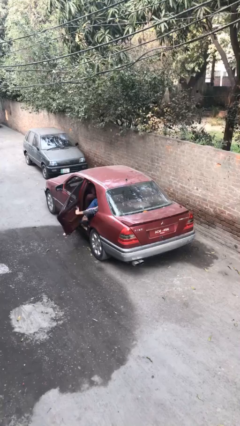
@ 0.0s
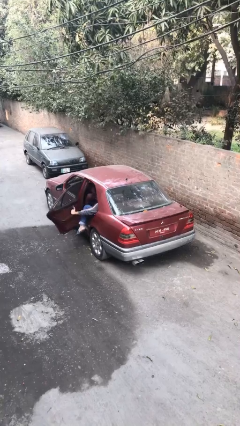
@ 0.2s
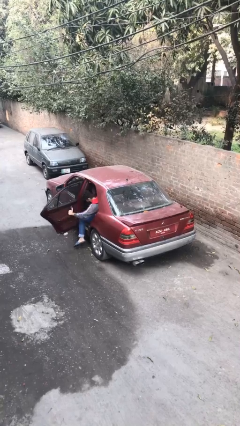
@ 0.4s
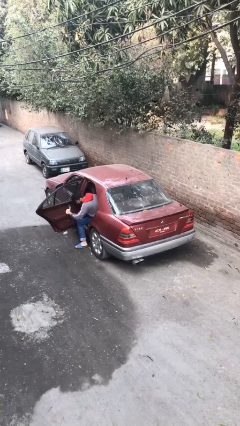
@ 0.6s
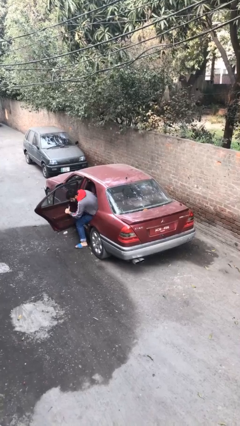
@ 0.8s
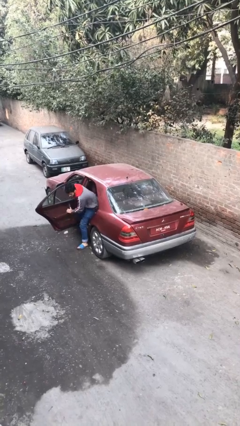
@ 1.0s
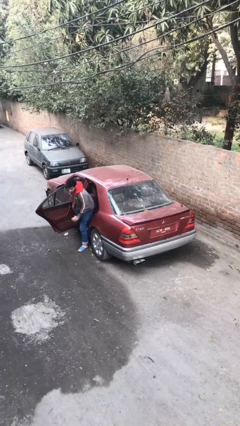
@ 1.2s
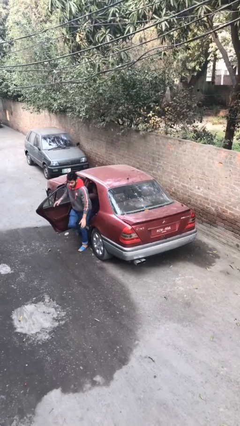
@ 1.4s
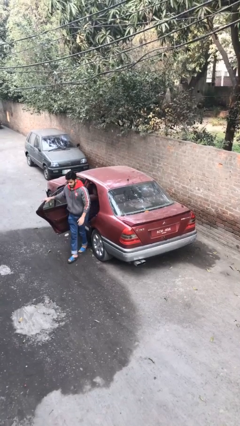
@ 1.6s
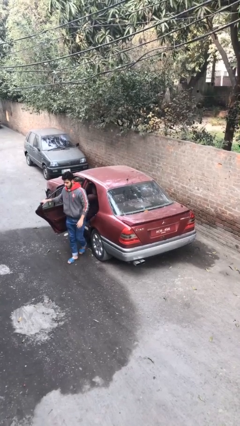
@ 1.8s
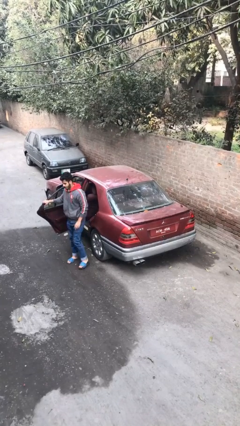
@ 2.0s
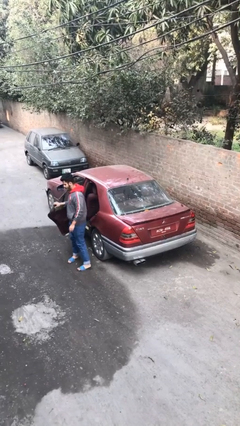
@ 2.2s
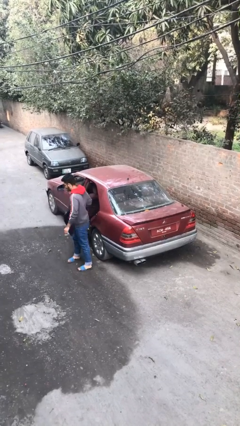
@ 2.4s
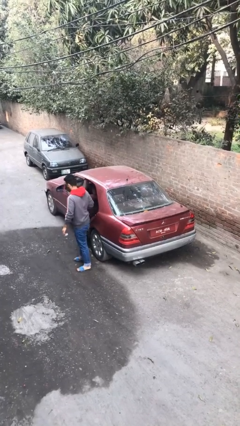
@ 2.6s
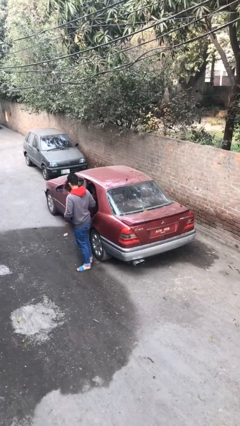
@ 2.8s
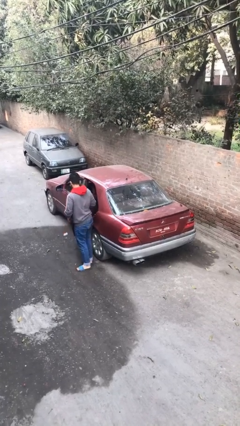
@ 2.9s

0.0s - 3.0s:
car drops off person

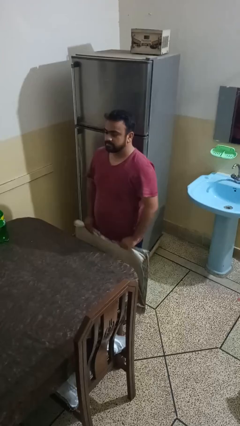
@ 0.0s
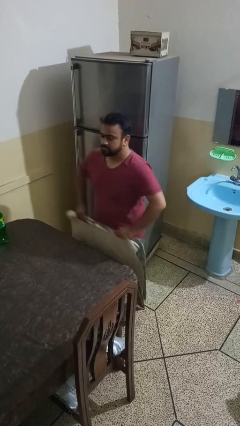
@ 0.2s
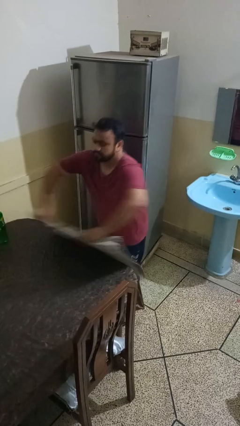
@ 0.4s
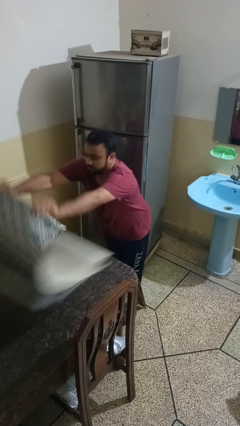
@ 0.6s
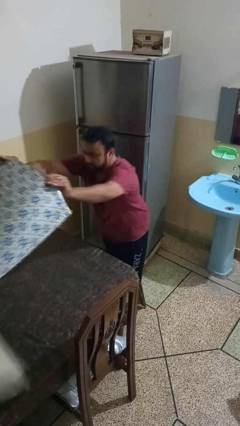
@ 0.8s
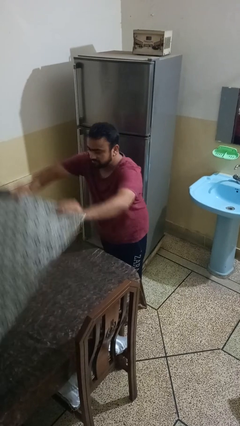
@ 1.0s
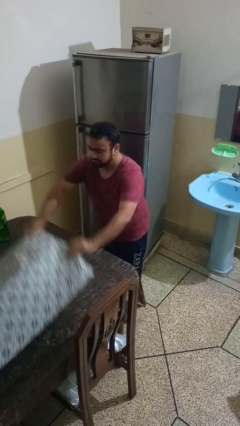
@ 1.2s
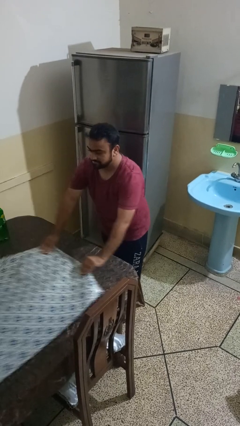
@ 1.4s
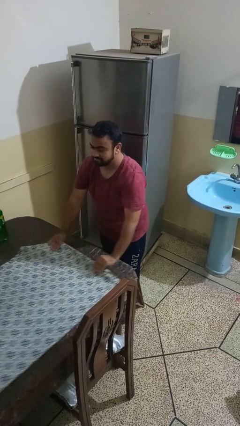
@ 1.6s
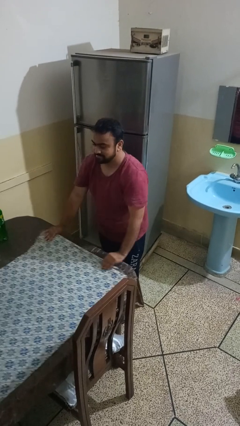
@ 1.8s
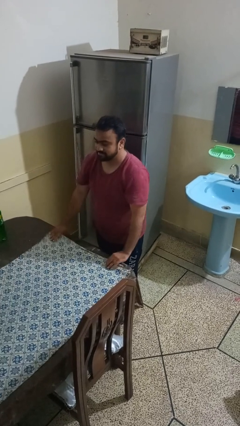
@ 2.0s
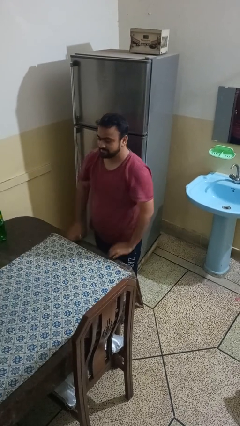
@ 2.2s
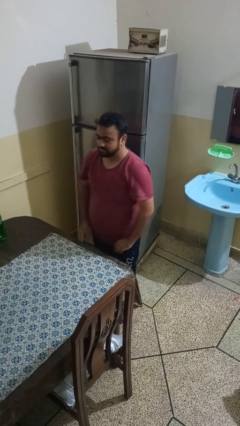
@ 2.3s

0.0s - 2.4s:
person spreads tablecloth

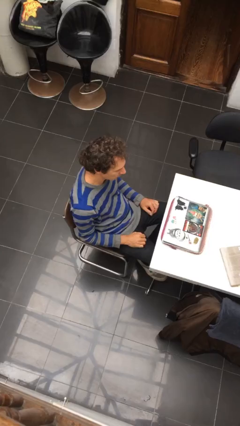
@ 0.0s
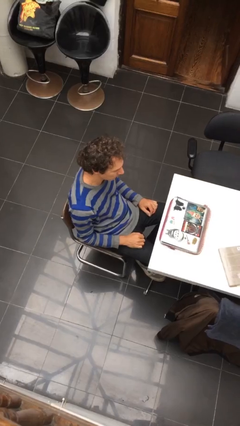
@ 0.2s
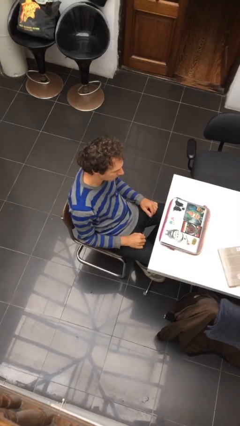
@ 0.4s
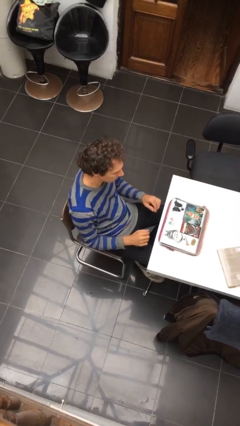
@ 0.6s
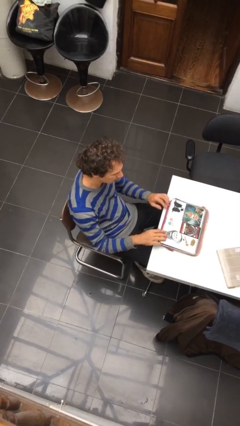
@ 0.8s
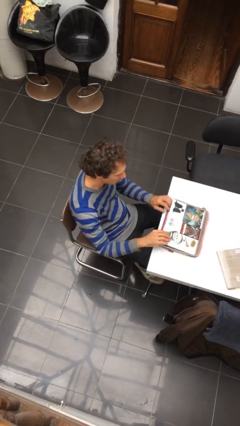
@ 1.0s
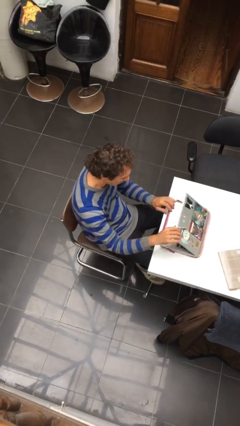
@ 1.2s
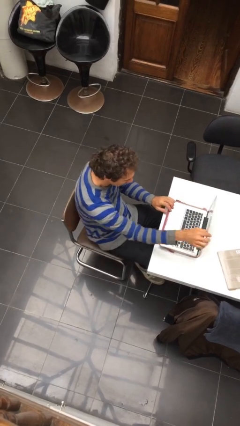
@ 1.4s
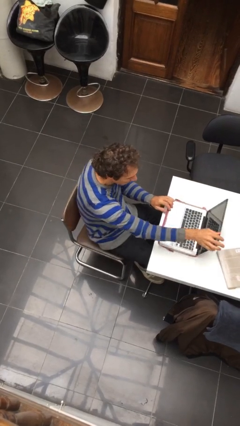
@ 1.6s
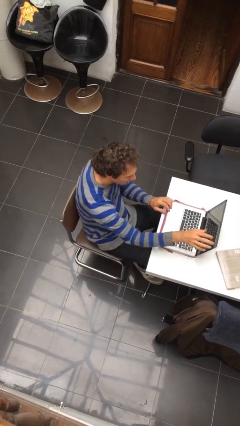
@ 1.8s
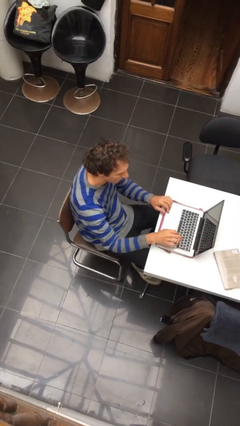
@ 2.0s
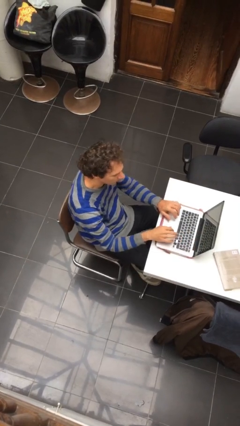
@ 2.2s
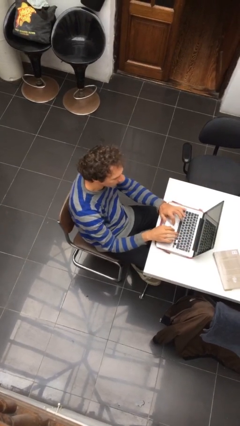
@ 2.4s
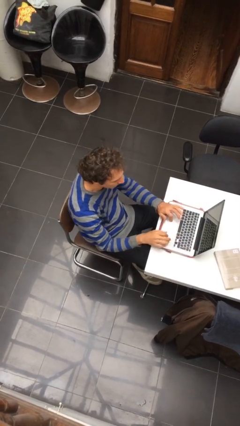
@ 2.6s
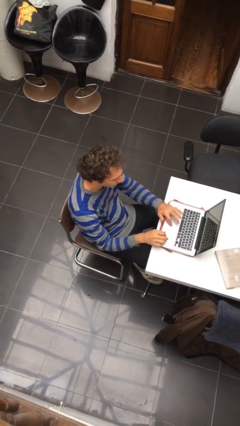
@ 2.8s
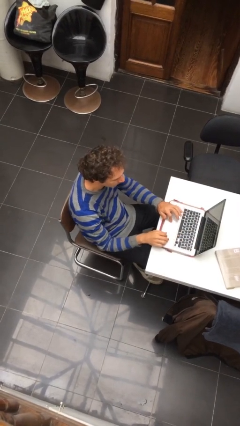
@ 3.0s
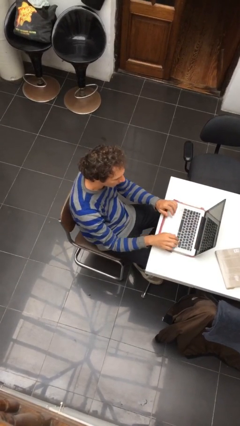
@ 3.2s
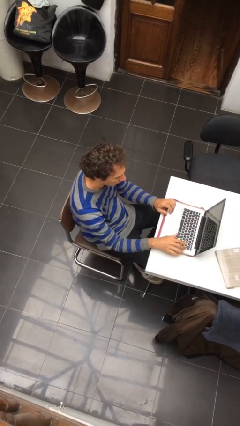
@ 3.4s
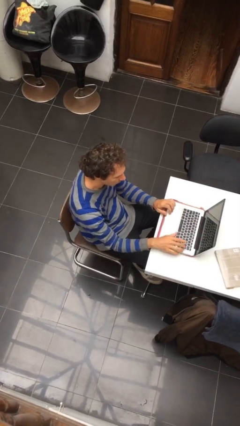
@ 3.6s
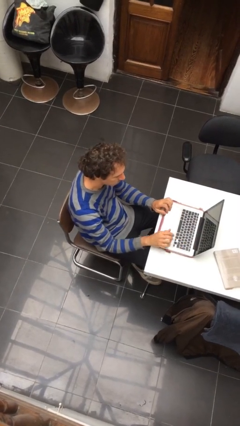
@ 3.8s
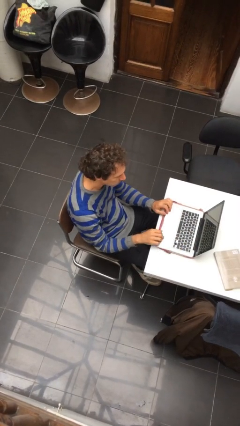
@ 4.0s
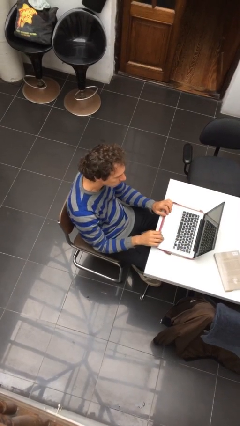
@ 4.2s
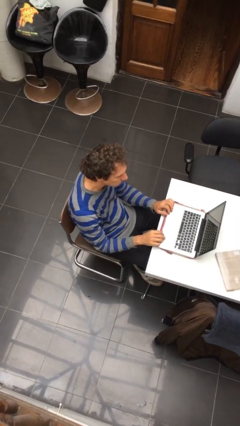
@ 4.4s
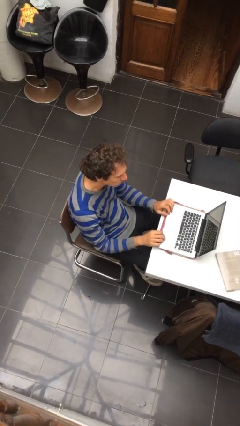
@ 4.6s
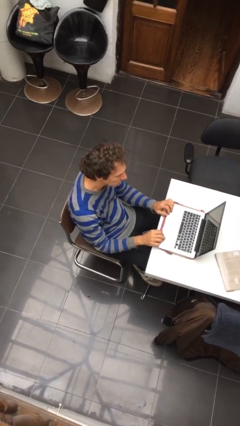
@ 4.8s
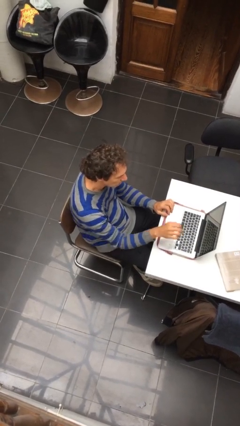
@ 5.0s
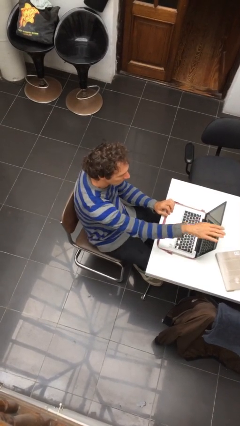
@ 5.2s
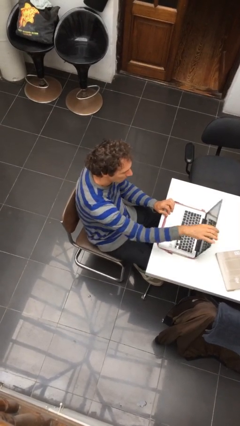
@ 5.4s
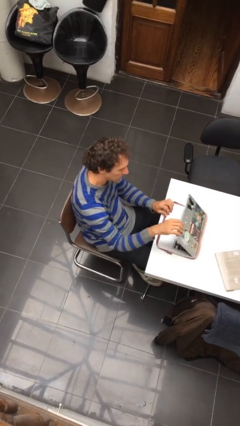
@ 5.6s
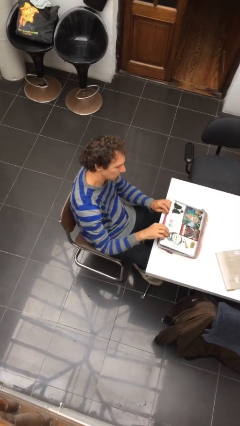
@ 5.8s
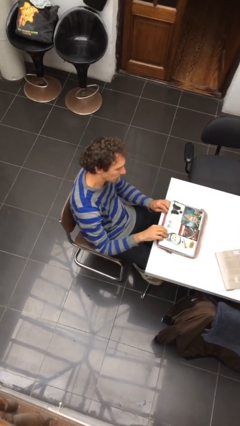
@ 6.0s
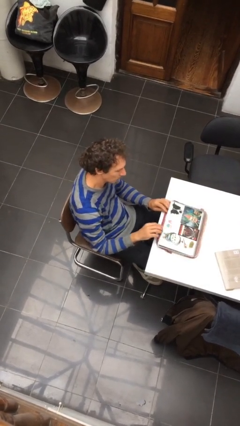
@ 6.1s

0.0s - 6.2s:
person interacts with laptop

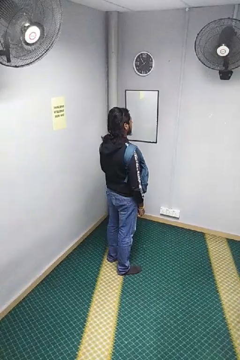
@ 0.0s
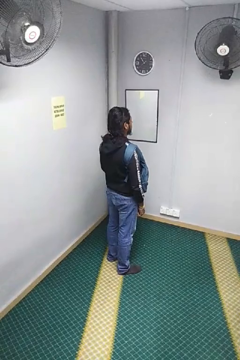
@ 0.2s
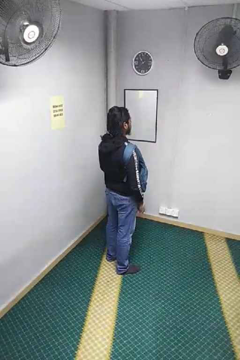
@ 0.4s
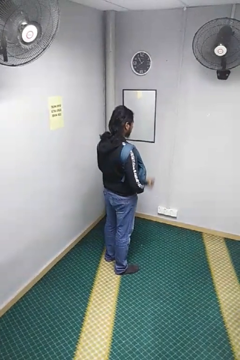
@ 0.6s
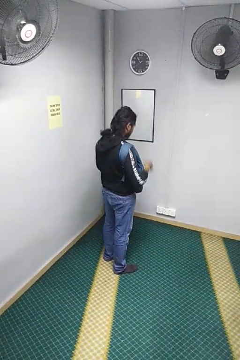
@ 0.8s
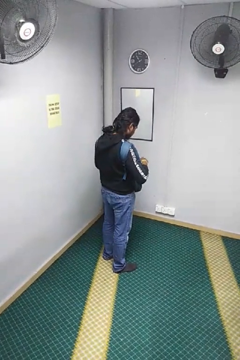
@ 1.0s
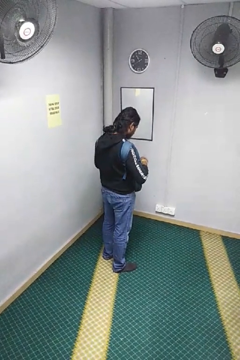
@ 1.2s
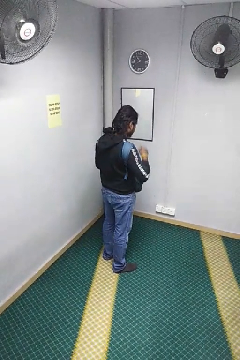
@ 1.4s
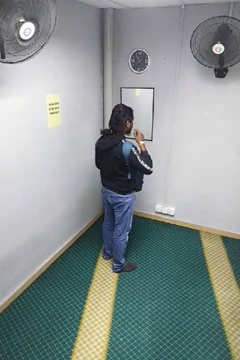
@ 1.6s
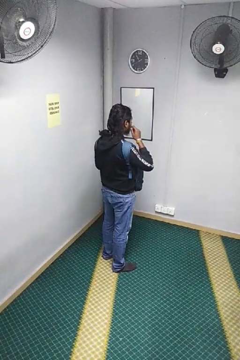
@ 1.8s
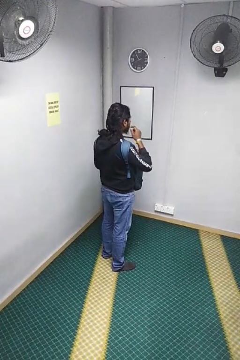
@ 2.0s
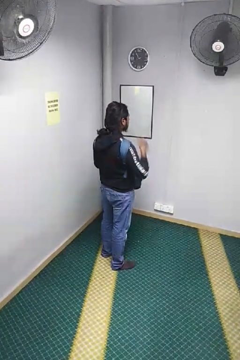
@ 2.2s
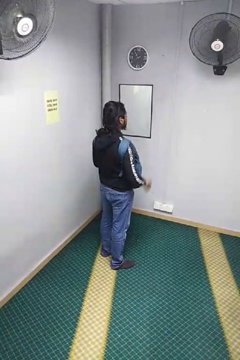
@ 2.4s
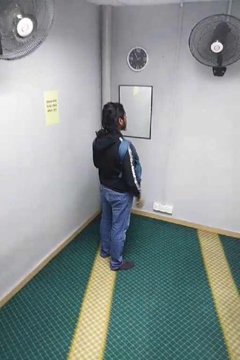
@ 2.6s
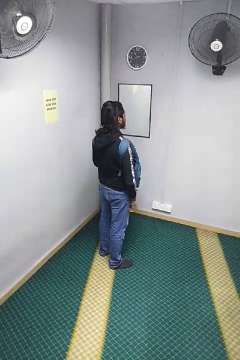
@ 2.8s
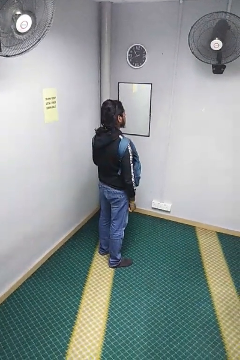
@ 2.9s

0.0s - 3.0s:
person eats snack from bag

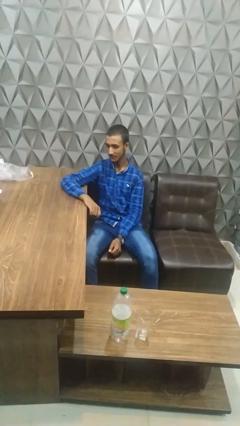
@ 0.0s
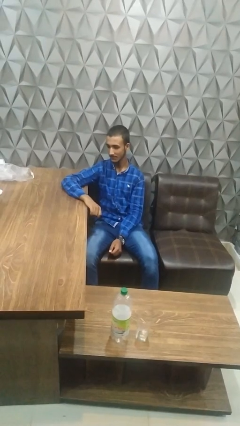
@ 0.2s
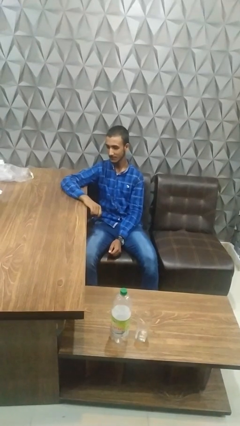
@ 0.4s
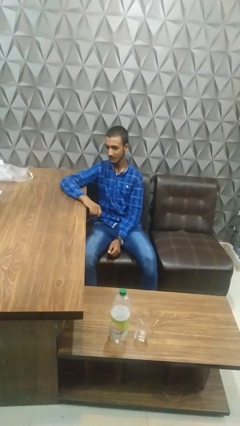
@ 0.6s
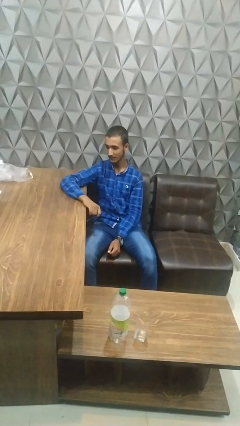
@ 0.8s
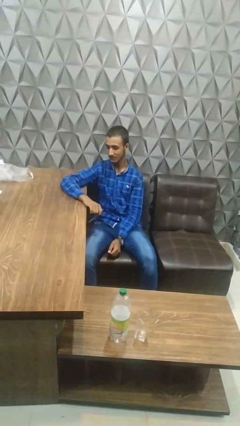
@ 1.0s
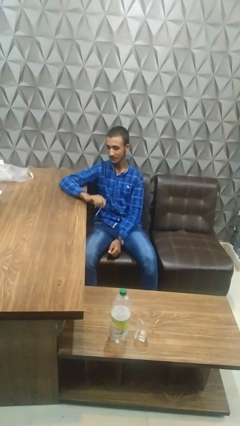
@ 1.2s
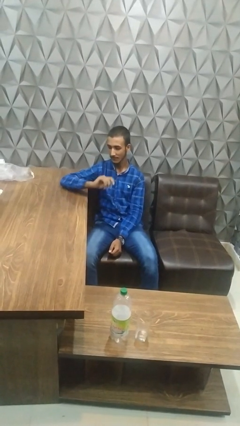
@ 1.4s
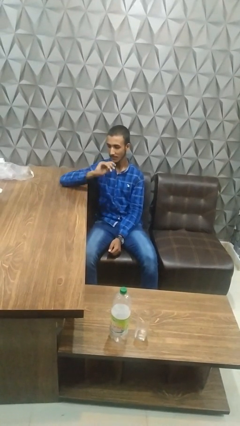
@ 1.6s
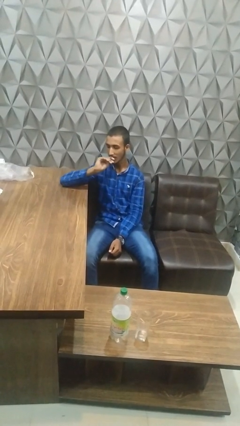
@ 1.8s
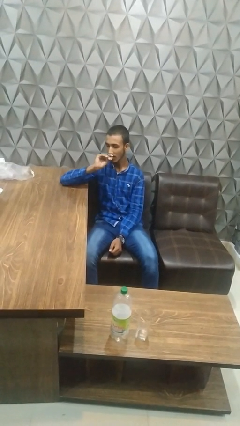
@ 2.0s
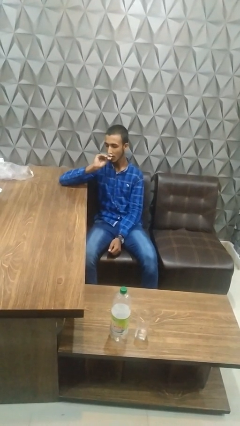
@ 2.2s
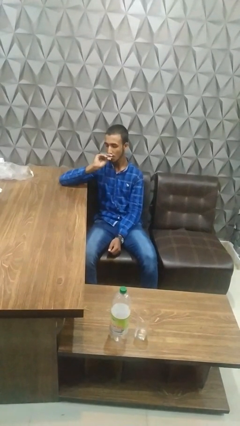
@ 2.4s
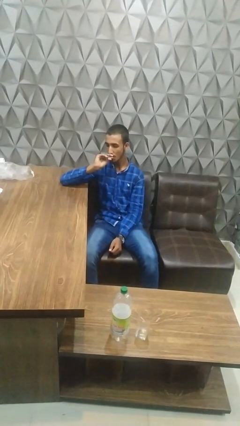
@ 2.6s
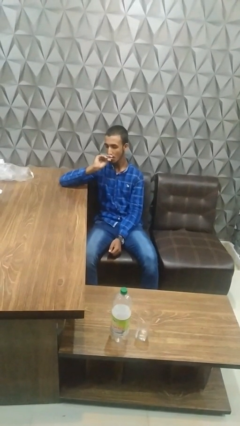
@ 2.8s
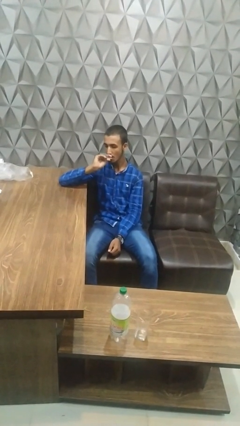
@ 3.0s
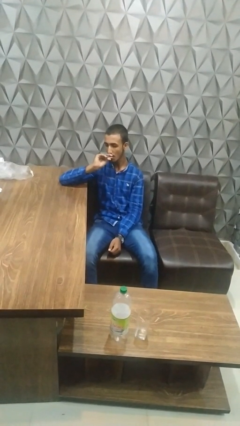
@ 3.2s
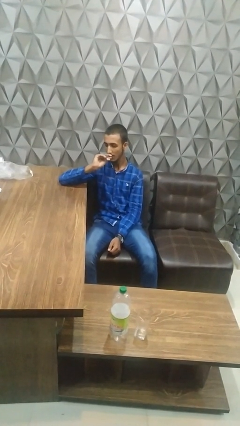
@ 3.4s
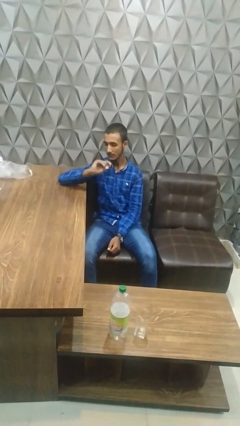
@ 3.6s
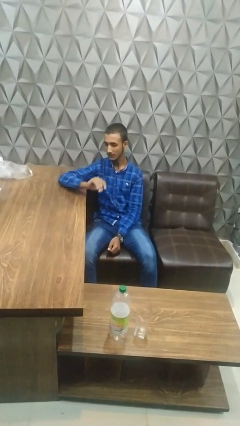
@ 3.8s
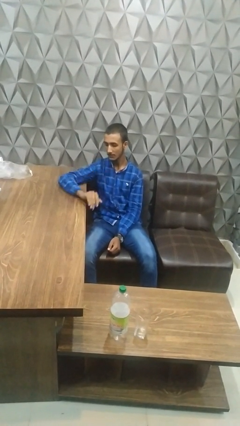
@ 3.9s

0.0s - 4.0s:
person vapes
